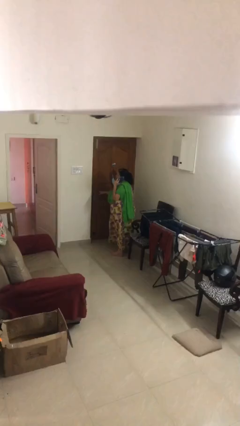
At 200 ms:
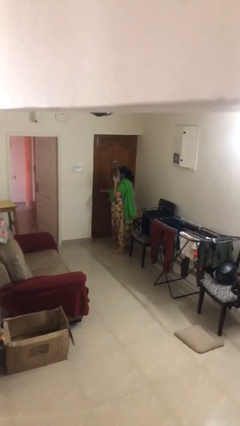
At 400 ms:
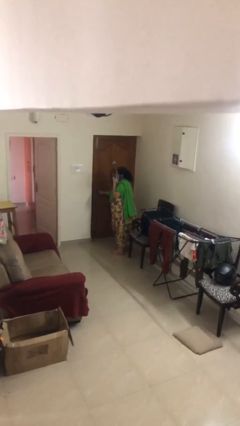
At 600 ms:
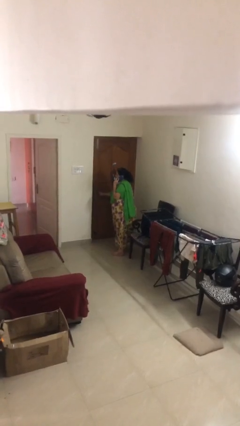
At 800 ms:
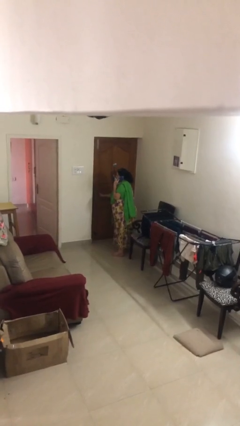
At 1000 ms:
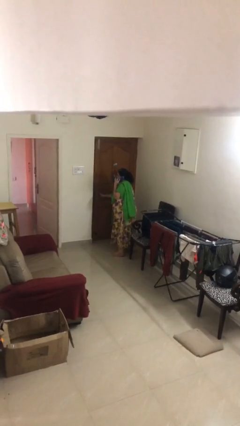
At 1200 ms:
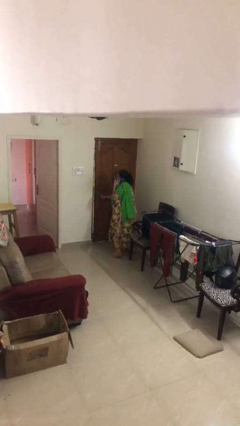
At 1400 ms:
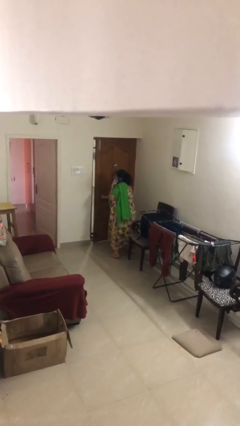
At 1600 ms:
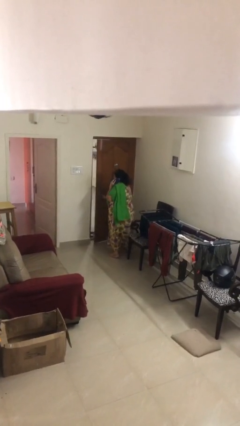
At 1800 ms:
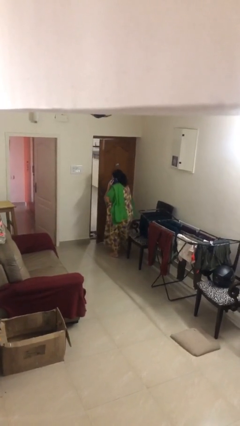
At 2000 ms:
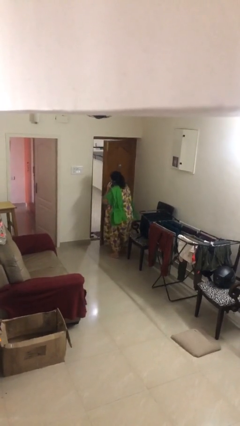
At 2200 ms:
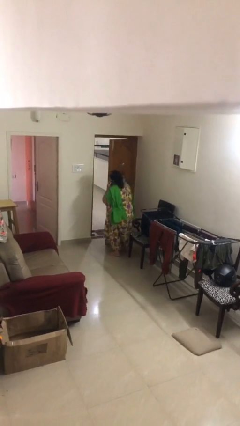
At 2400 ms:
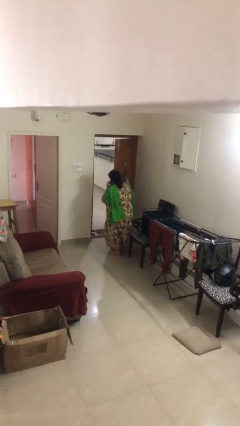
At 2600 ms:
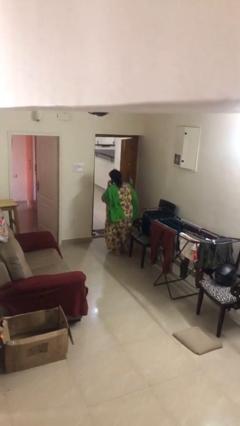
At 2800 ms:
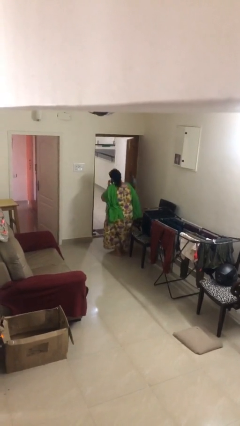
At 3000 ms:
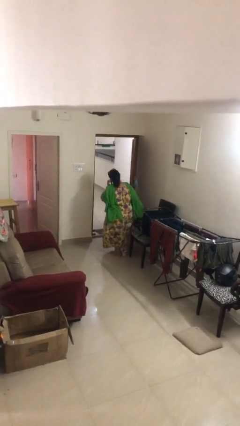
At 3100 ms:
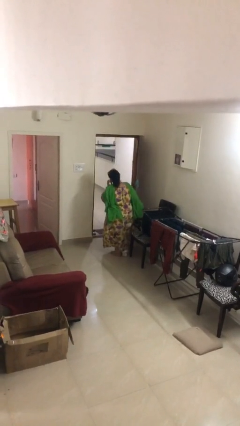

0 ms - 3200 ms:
person opens facility door

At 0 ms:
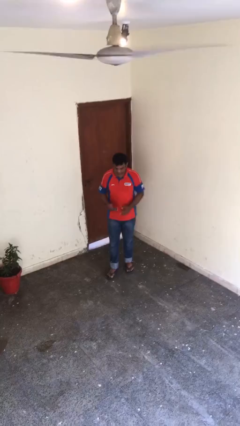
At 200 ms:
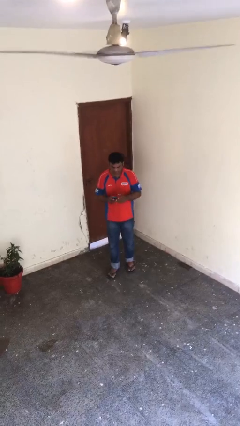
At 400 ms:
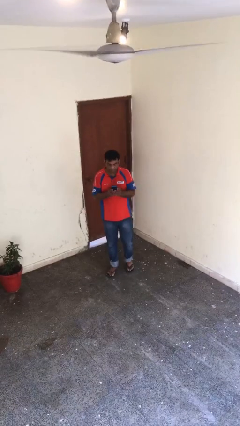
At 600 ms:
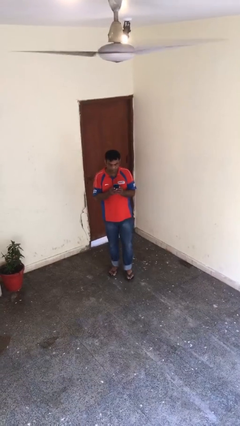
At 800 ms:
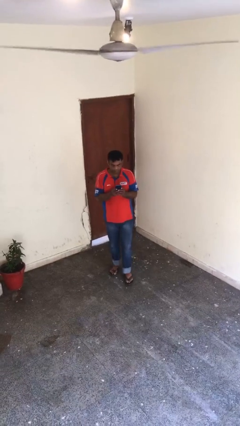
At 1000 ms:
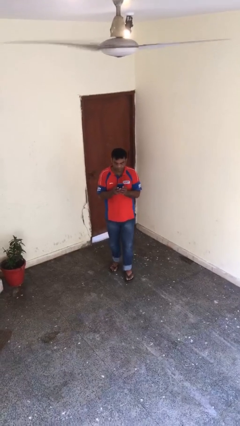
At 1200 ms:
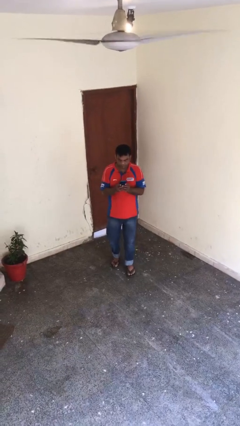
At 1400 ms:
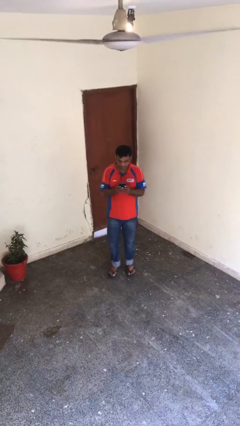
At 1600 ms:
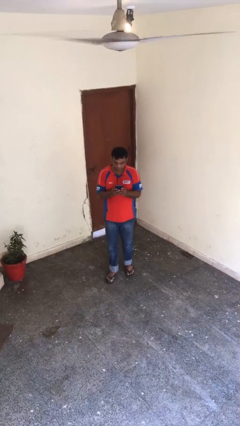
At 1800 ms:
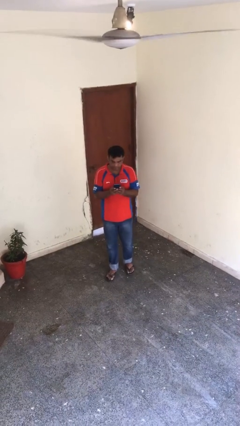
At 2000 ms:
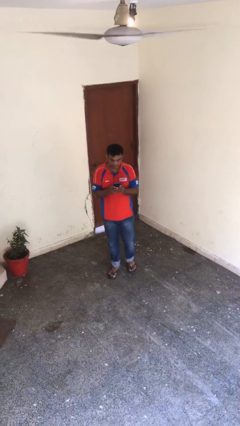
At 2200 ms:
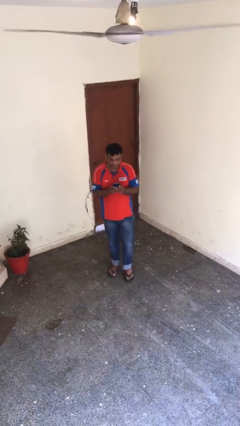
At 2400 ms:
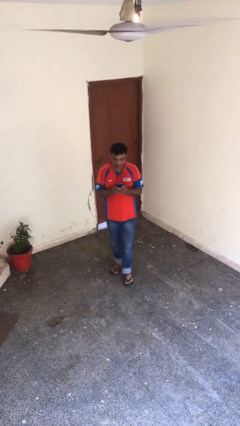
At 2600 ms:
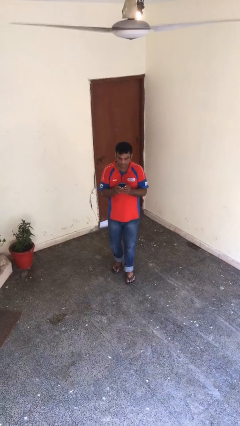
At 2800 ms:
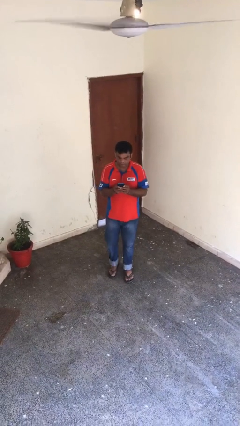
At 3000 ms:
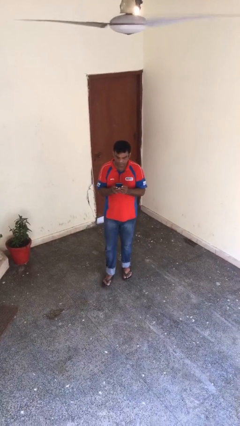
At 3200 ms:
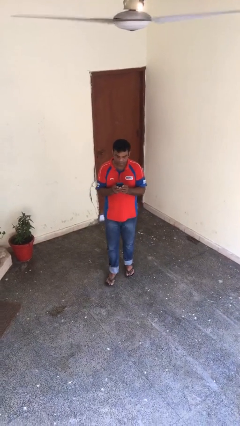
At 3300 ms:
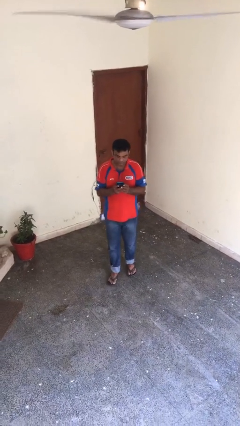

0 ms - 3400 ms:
person texts on phone

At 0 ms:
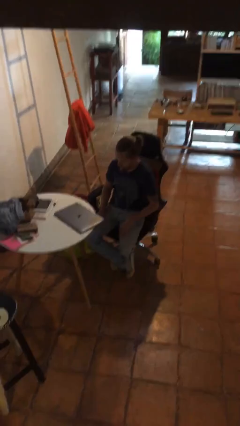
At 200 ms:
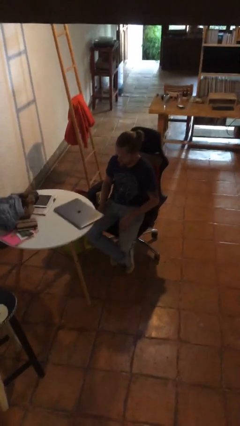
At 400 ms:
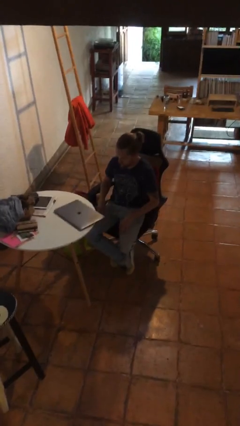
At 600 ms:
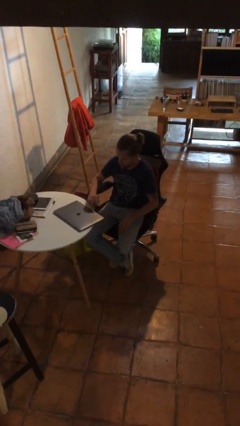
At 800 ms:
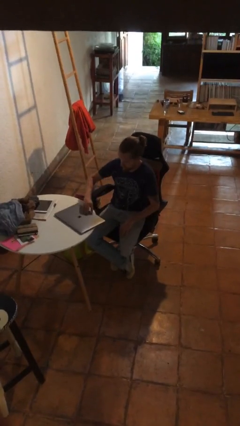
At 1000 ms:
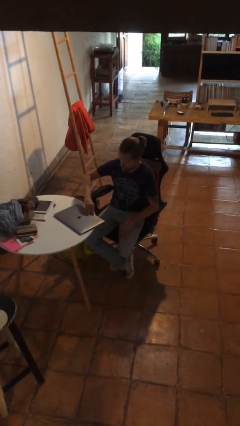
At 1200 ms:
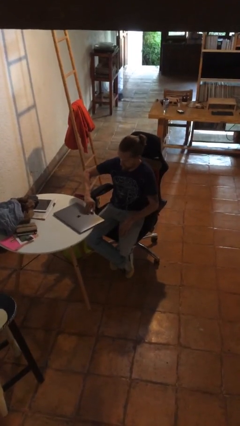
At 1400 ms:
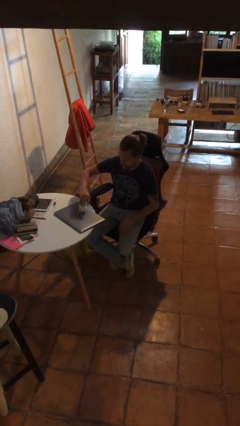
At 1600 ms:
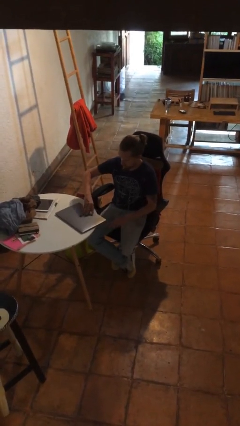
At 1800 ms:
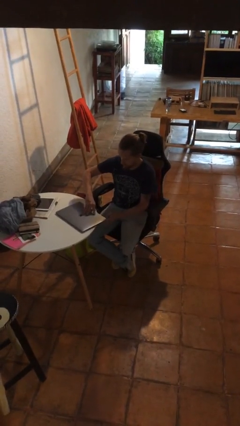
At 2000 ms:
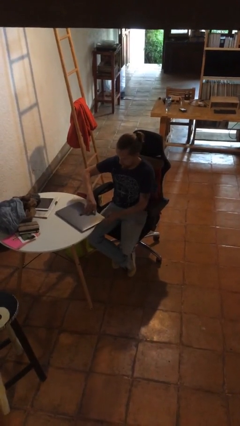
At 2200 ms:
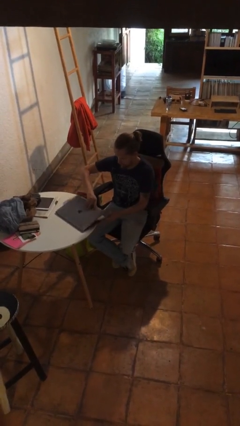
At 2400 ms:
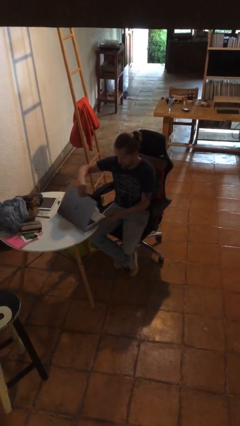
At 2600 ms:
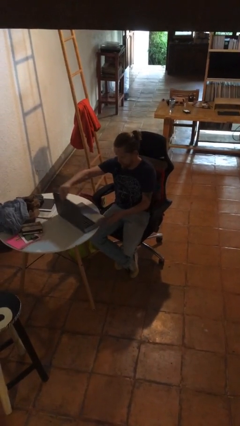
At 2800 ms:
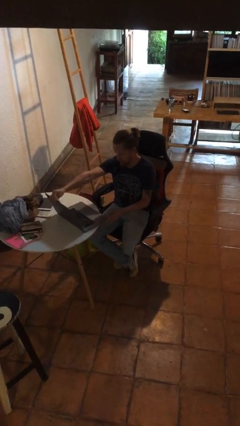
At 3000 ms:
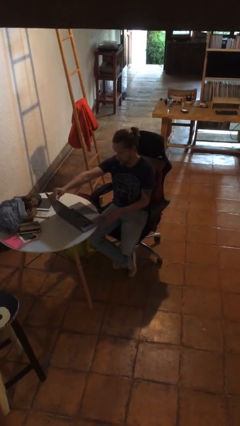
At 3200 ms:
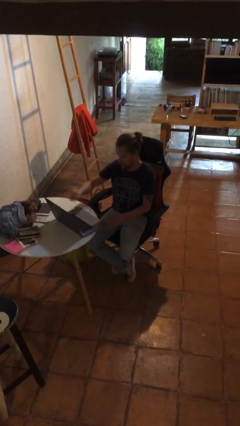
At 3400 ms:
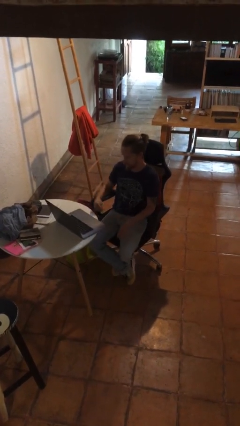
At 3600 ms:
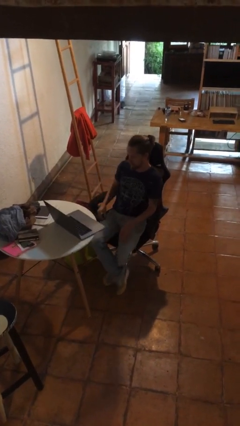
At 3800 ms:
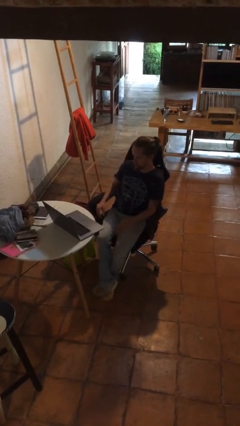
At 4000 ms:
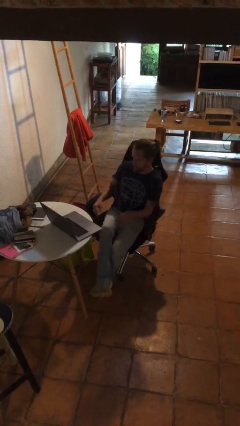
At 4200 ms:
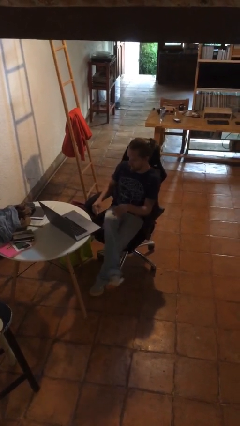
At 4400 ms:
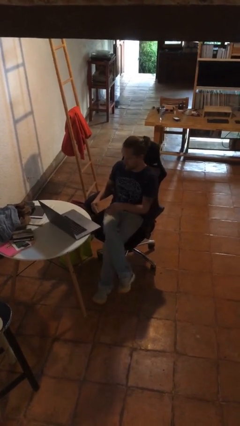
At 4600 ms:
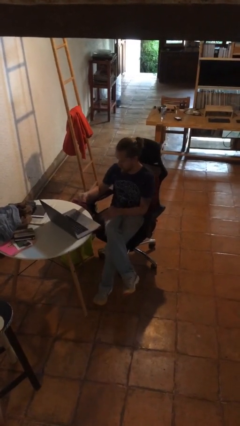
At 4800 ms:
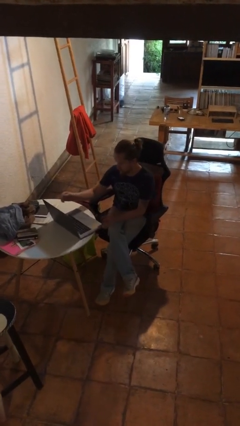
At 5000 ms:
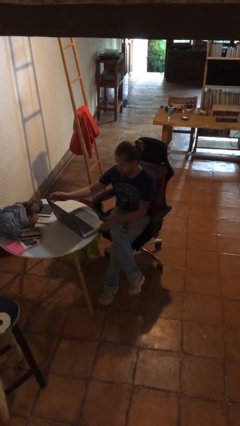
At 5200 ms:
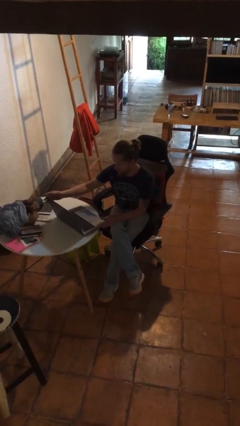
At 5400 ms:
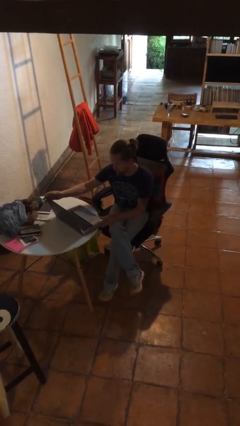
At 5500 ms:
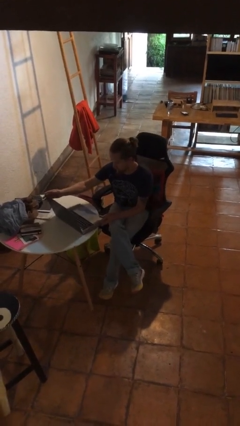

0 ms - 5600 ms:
person opens laptop

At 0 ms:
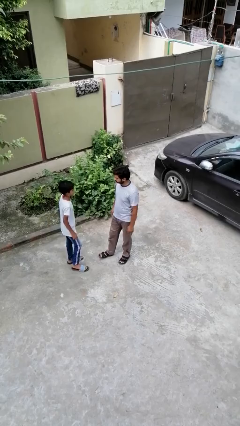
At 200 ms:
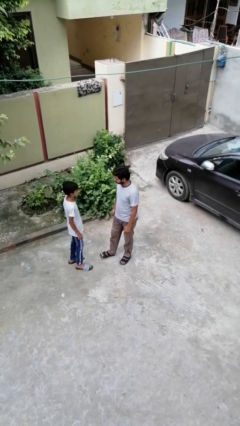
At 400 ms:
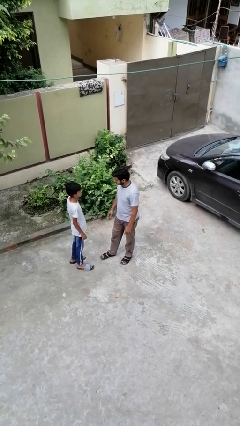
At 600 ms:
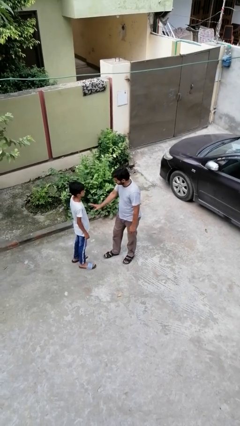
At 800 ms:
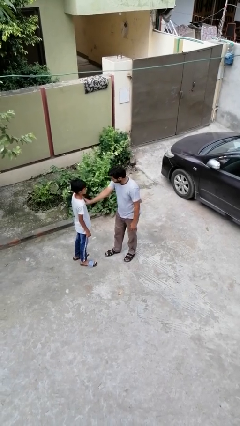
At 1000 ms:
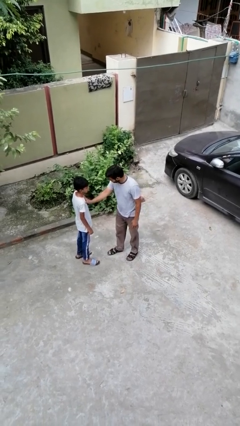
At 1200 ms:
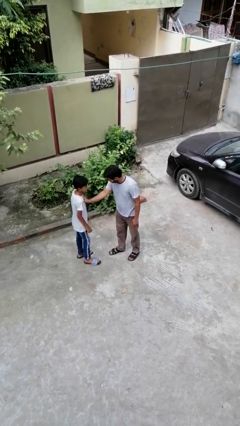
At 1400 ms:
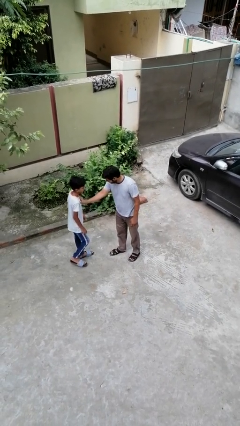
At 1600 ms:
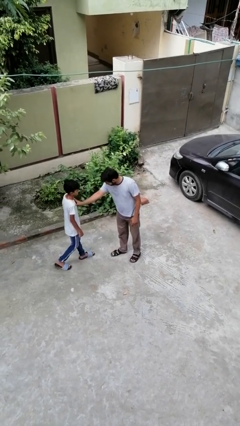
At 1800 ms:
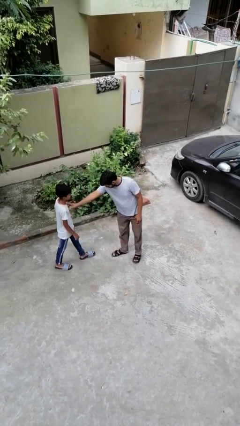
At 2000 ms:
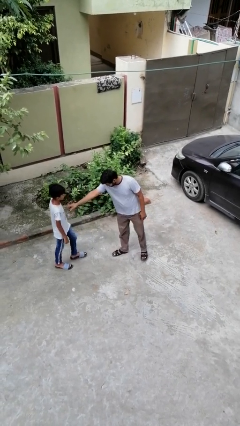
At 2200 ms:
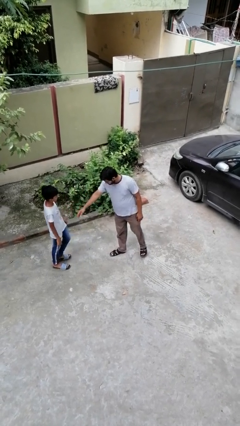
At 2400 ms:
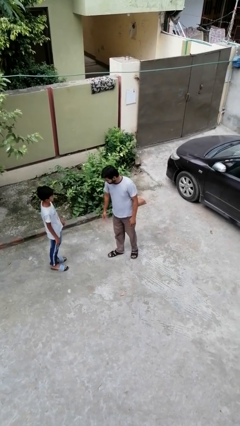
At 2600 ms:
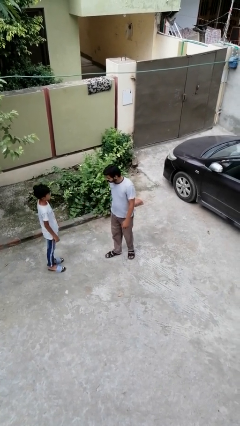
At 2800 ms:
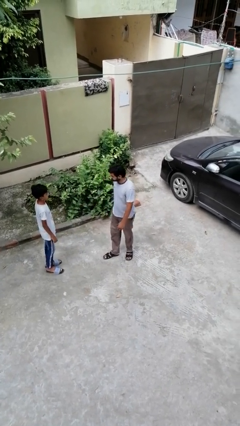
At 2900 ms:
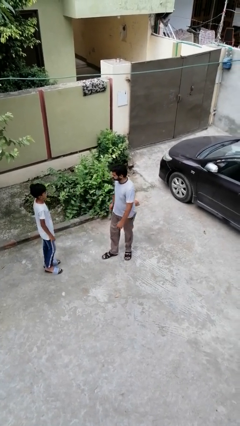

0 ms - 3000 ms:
person shoves person

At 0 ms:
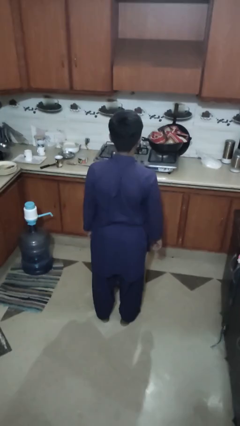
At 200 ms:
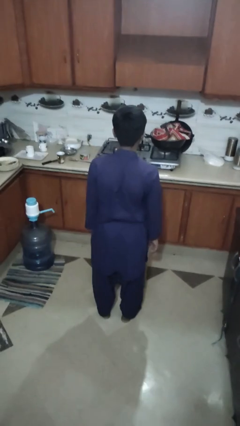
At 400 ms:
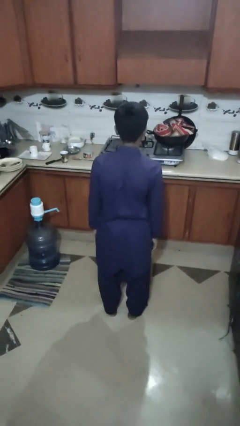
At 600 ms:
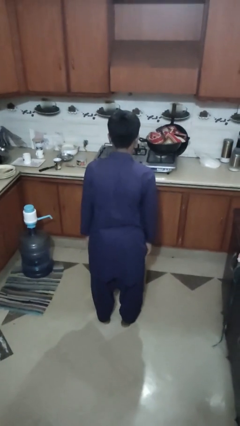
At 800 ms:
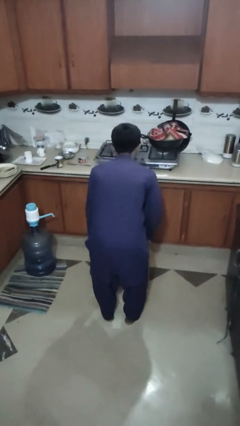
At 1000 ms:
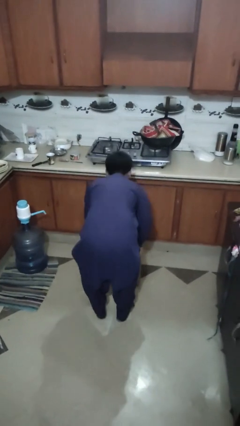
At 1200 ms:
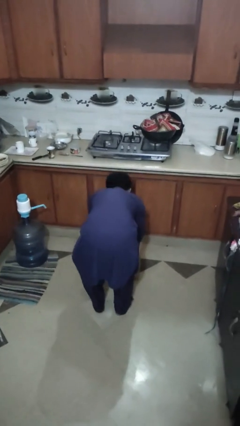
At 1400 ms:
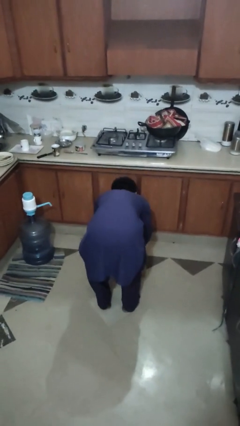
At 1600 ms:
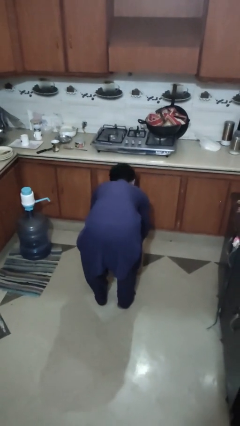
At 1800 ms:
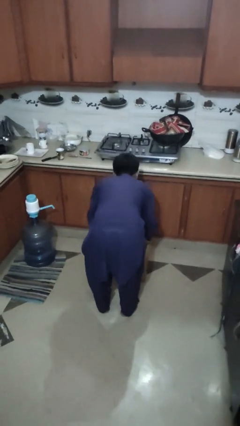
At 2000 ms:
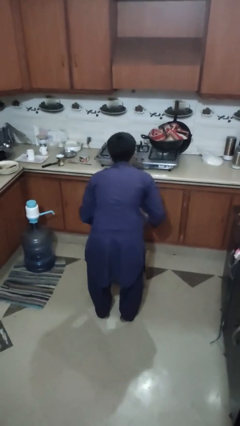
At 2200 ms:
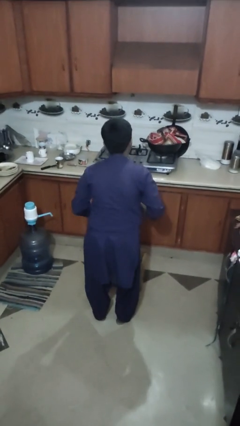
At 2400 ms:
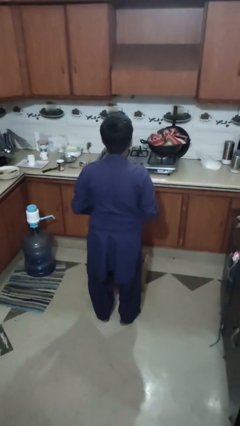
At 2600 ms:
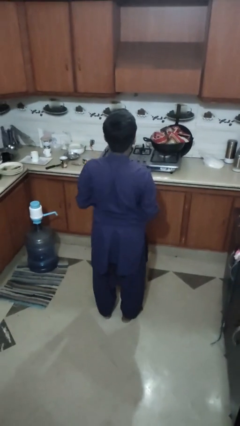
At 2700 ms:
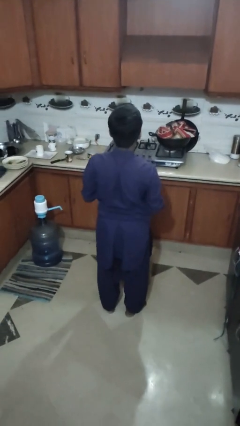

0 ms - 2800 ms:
person takes object from box
